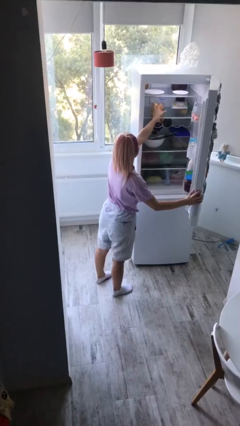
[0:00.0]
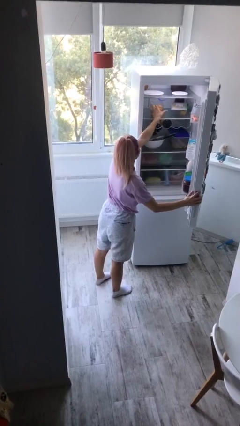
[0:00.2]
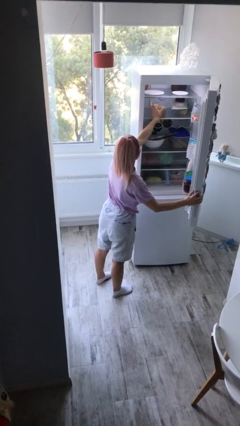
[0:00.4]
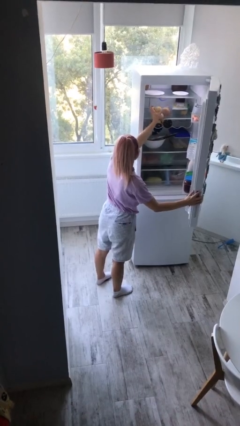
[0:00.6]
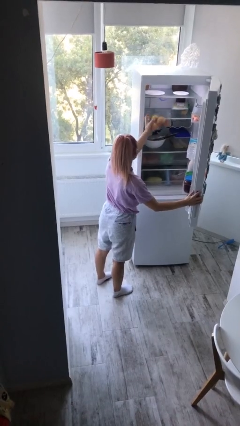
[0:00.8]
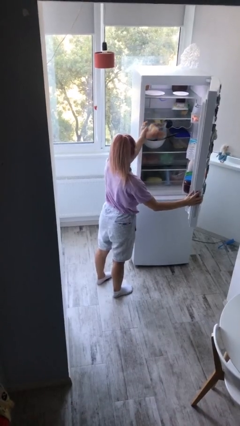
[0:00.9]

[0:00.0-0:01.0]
person takes object from refrigerator

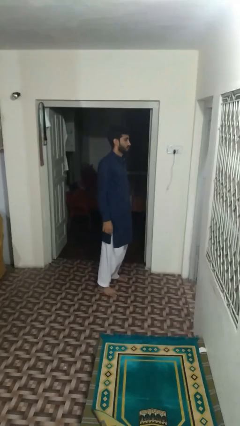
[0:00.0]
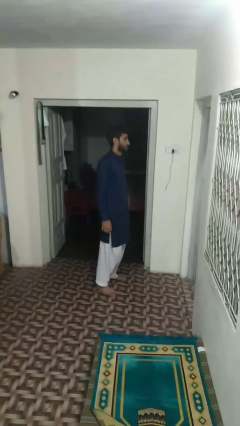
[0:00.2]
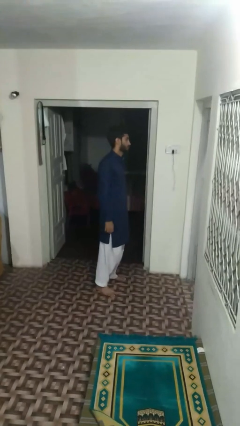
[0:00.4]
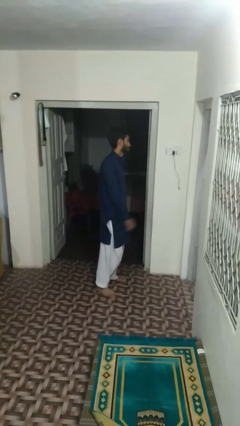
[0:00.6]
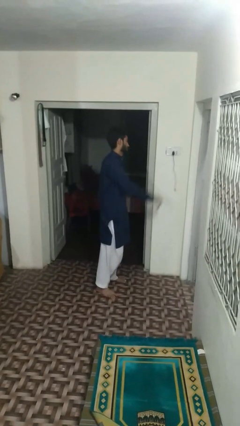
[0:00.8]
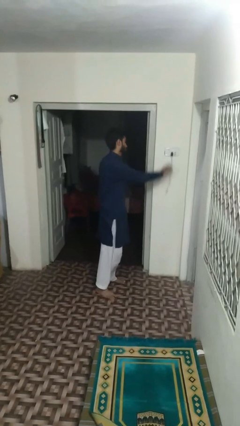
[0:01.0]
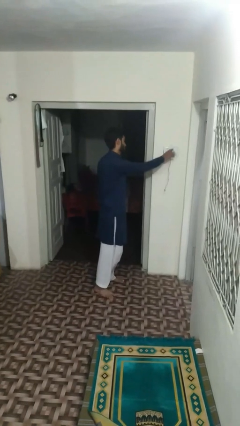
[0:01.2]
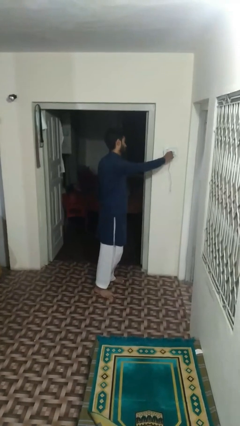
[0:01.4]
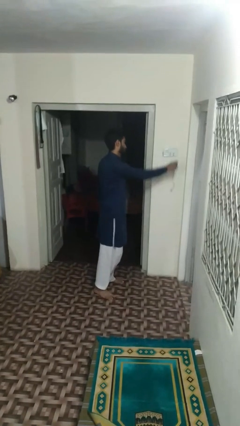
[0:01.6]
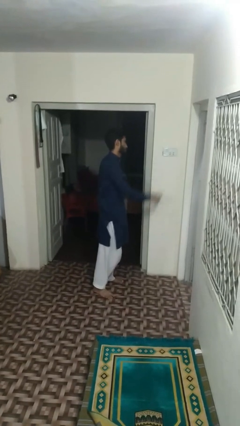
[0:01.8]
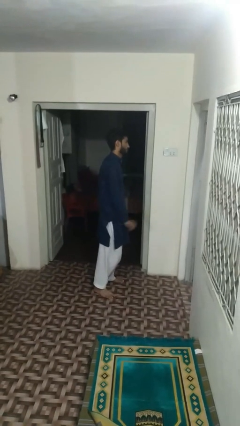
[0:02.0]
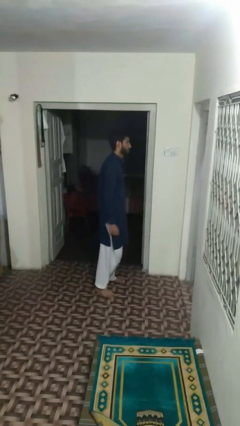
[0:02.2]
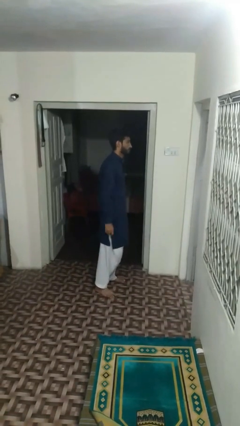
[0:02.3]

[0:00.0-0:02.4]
person unplugs from electrical socket

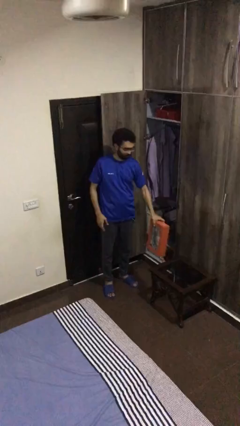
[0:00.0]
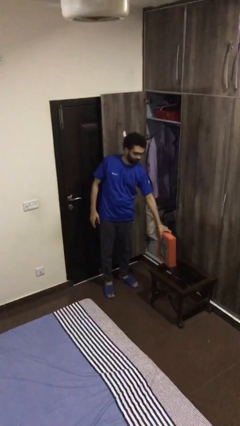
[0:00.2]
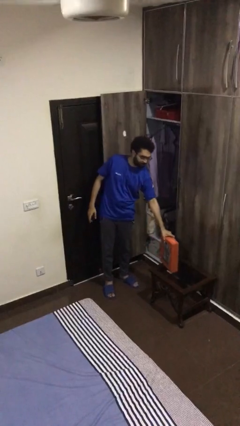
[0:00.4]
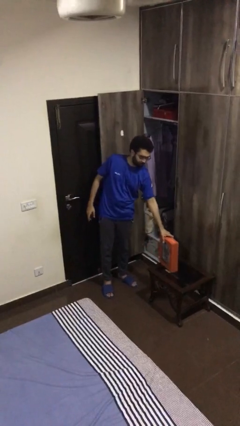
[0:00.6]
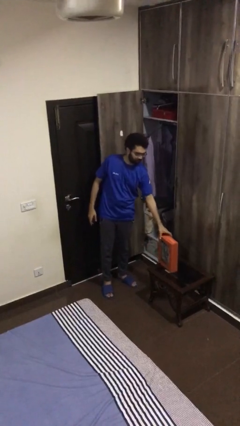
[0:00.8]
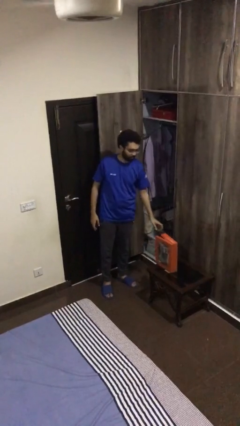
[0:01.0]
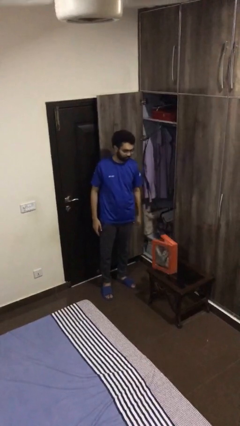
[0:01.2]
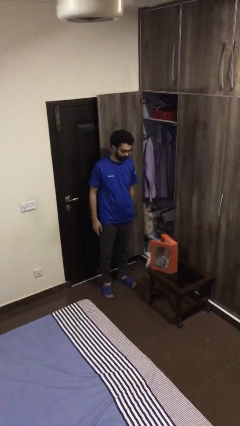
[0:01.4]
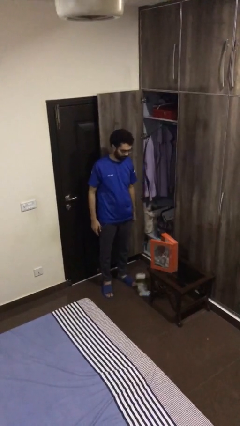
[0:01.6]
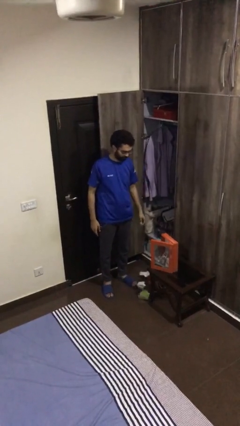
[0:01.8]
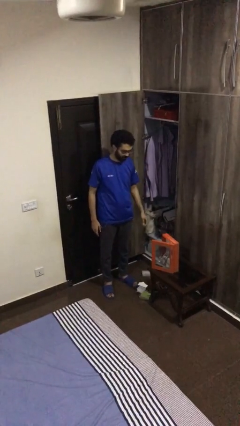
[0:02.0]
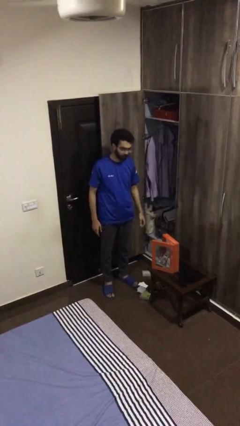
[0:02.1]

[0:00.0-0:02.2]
person puts down object on table

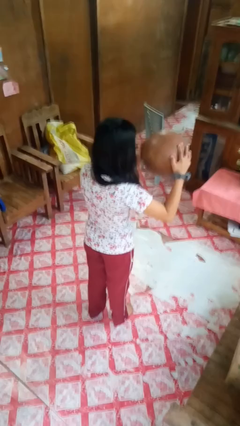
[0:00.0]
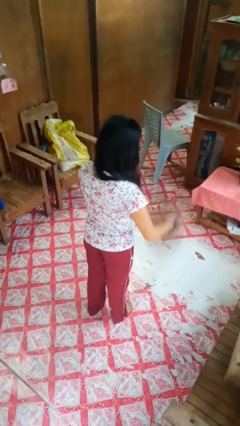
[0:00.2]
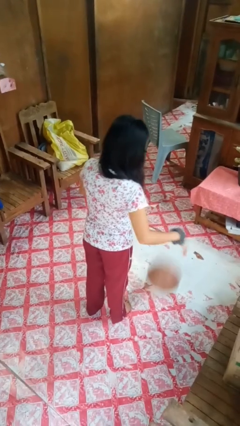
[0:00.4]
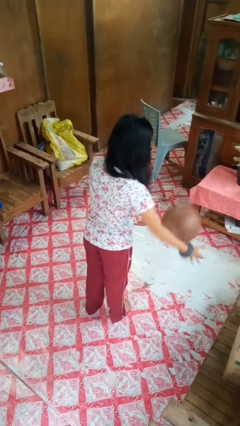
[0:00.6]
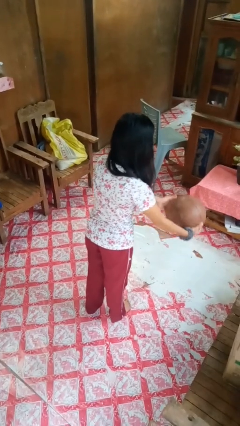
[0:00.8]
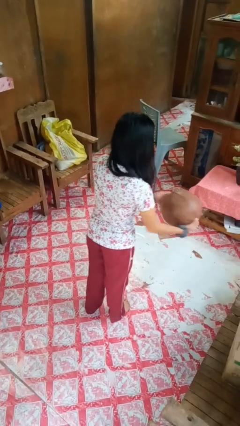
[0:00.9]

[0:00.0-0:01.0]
person bounces ball on floor

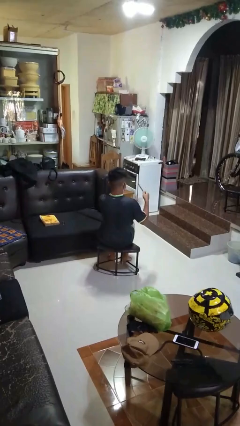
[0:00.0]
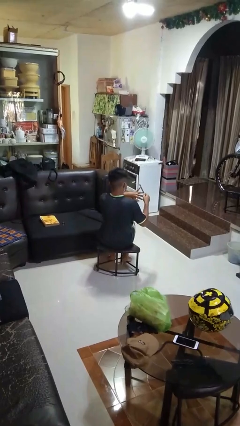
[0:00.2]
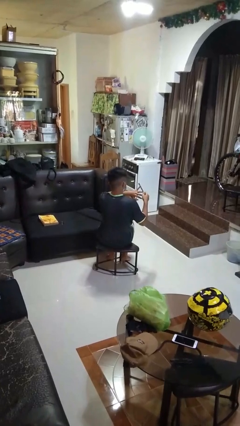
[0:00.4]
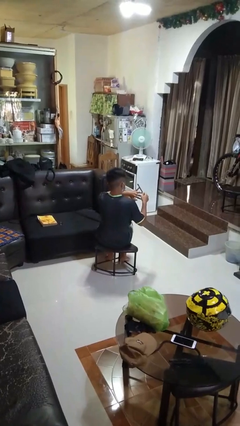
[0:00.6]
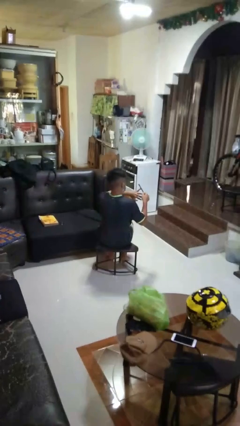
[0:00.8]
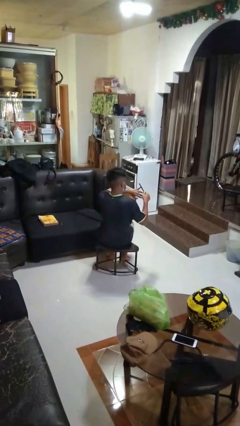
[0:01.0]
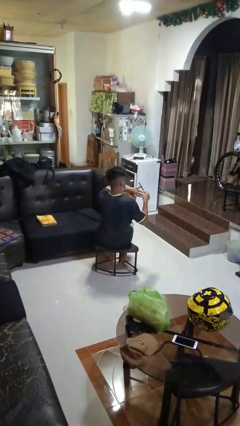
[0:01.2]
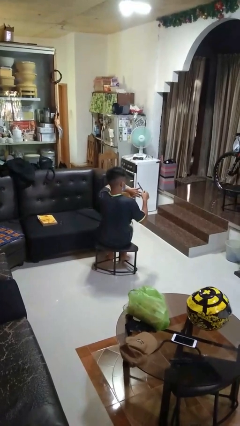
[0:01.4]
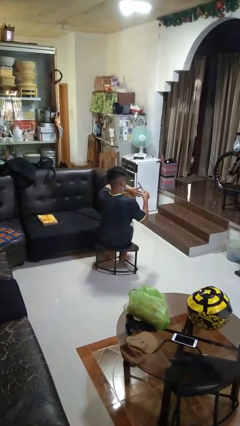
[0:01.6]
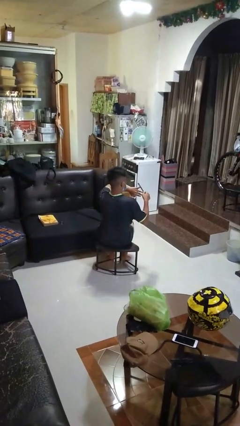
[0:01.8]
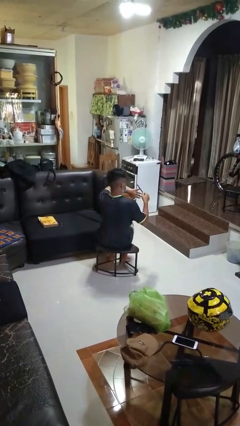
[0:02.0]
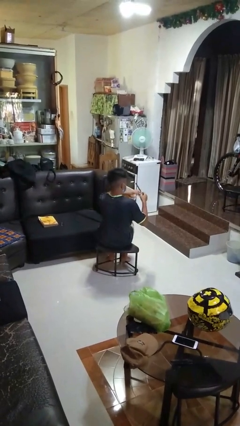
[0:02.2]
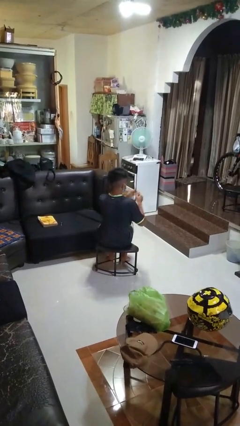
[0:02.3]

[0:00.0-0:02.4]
person files fingernails

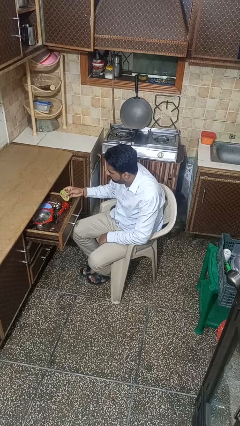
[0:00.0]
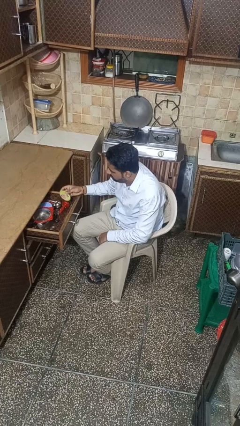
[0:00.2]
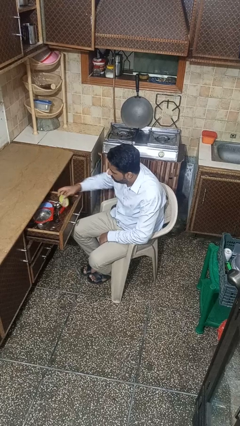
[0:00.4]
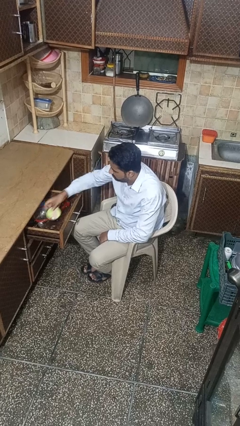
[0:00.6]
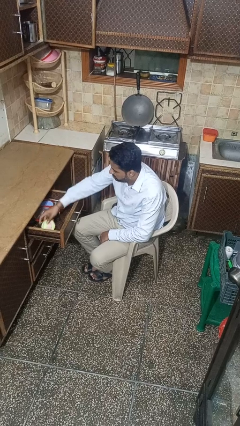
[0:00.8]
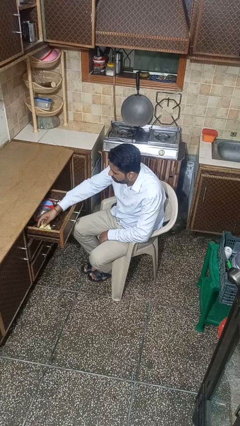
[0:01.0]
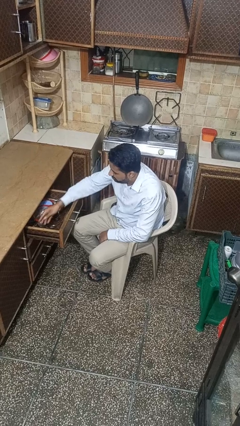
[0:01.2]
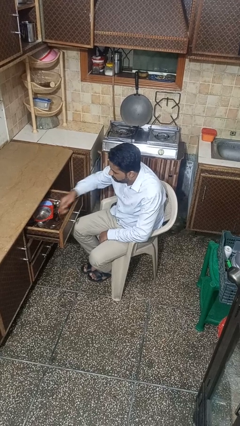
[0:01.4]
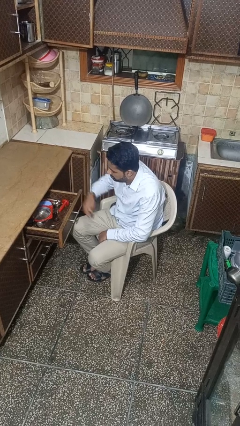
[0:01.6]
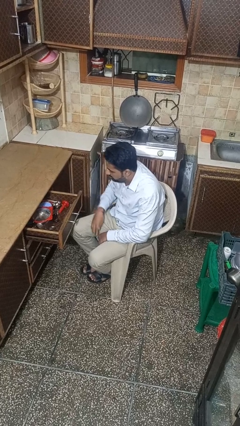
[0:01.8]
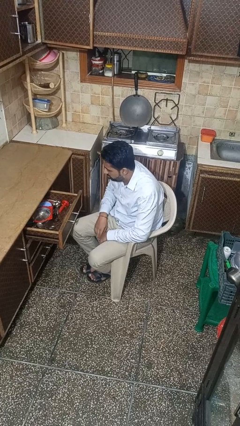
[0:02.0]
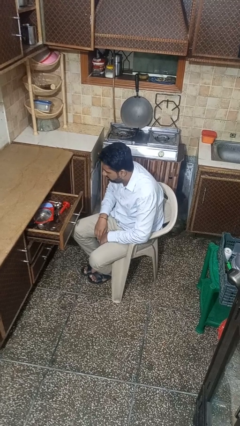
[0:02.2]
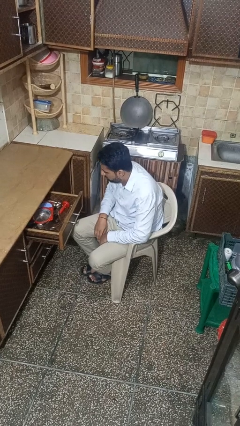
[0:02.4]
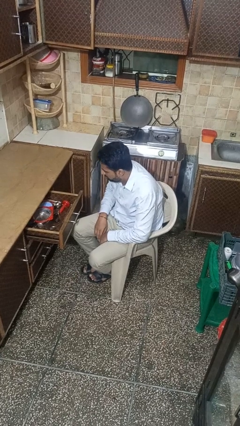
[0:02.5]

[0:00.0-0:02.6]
person puts object into kitchen drawer

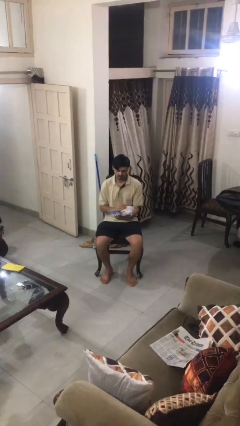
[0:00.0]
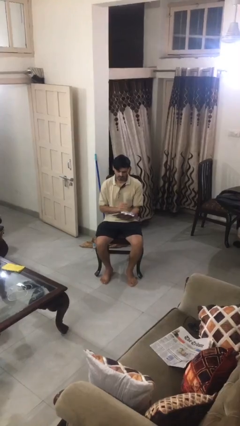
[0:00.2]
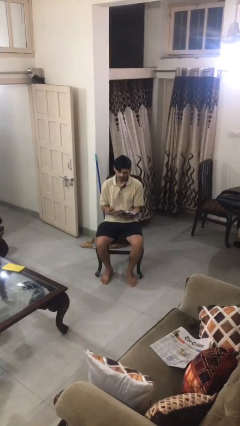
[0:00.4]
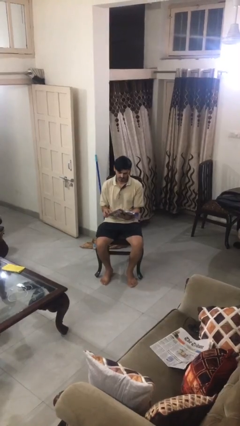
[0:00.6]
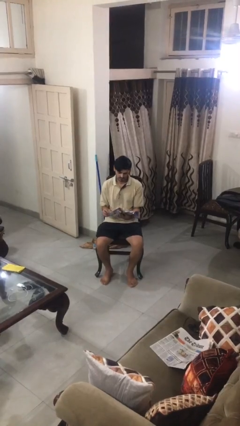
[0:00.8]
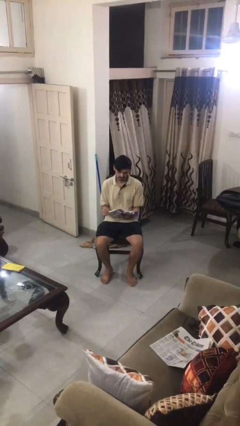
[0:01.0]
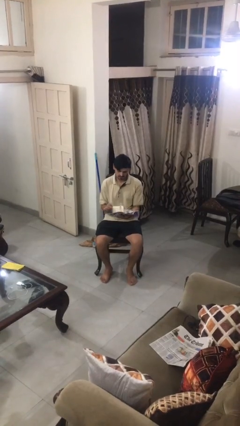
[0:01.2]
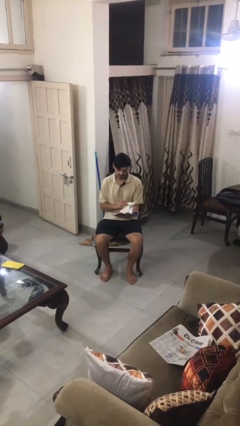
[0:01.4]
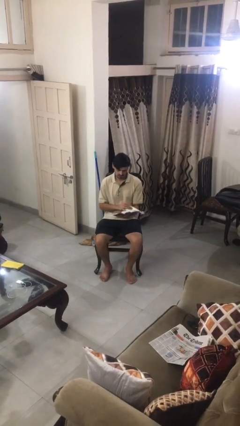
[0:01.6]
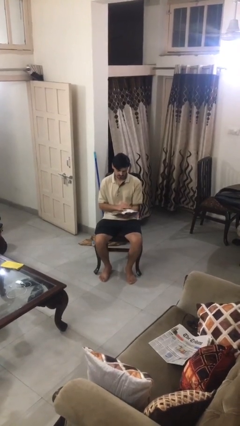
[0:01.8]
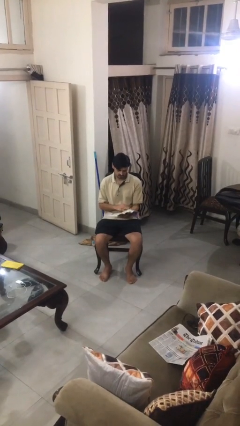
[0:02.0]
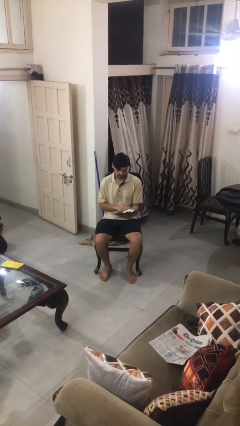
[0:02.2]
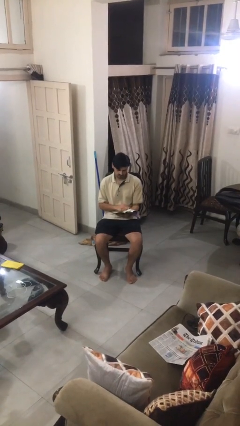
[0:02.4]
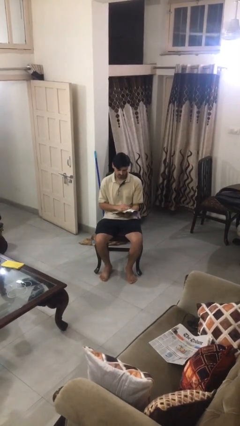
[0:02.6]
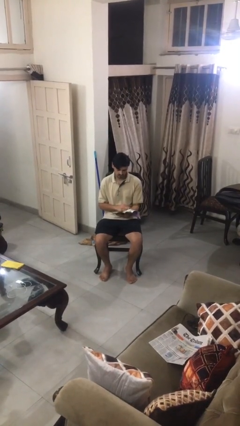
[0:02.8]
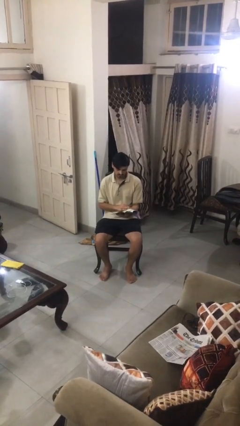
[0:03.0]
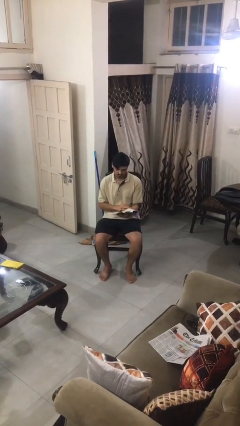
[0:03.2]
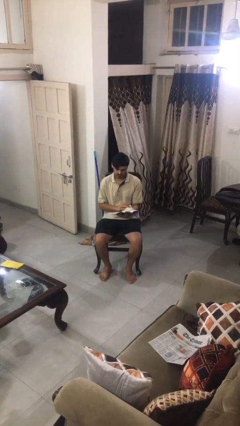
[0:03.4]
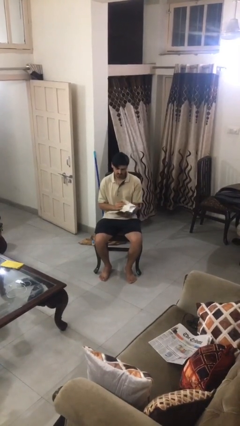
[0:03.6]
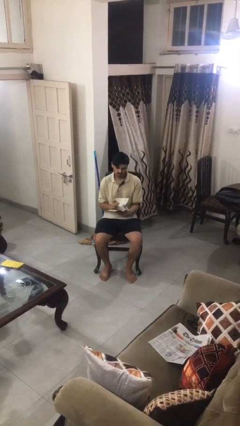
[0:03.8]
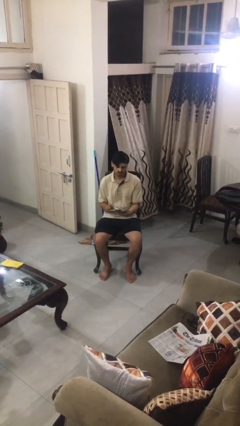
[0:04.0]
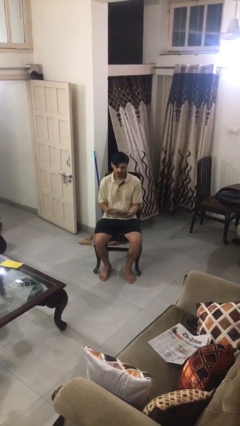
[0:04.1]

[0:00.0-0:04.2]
person reads magazine

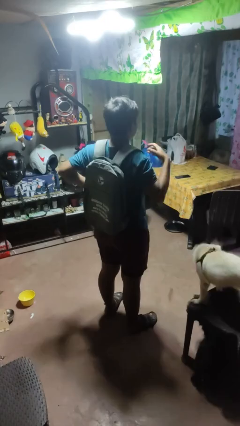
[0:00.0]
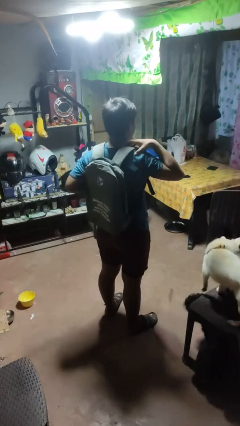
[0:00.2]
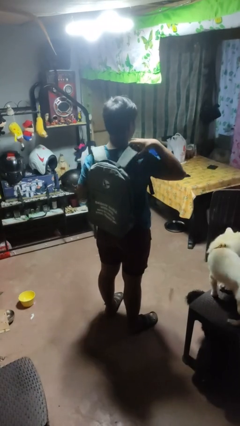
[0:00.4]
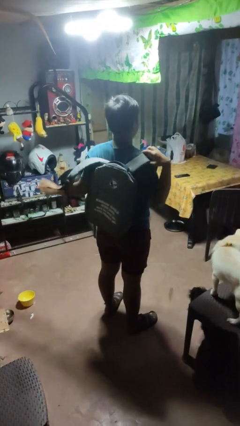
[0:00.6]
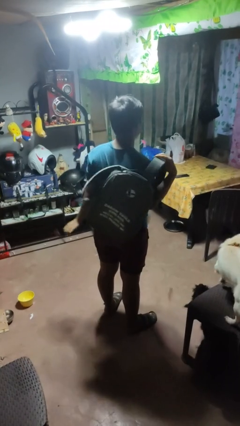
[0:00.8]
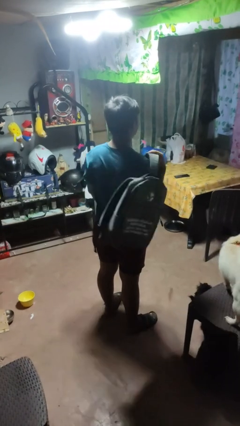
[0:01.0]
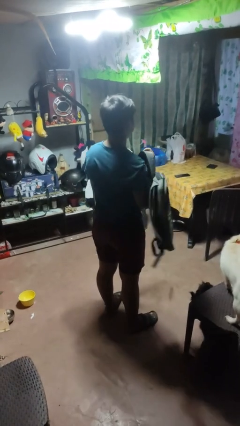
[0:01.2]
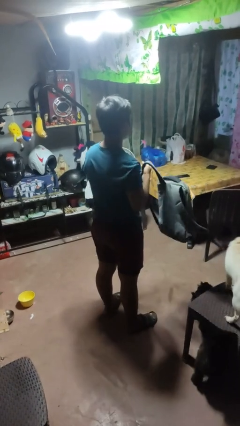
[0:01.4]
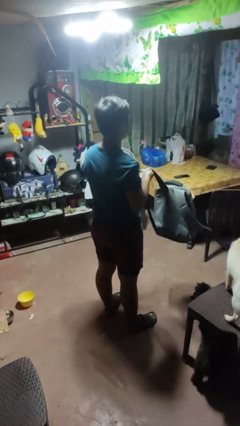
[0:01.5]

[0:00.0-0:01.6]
person takes off backpack
